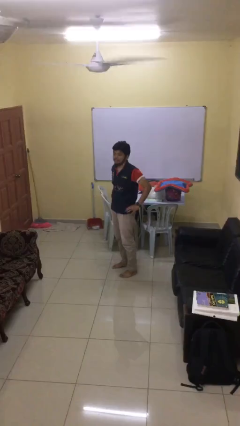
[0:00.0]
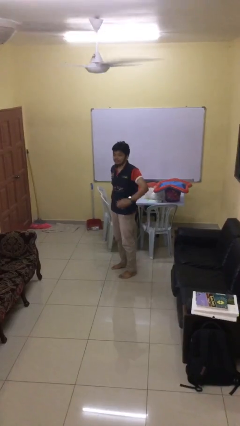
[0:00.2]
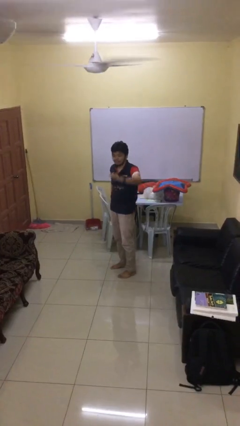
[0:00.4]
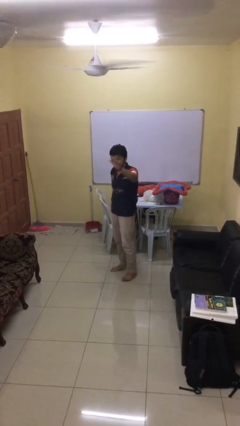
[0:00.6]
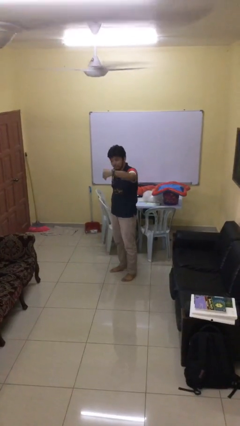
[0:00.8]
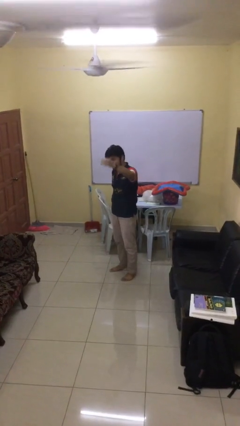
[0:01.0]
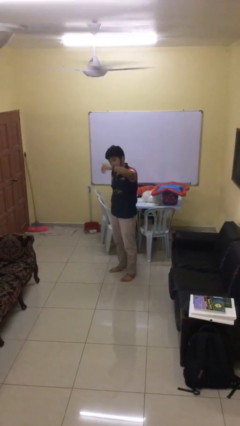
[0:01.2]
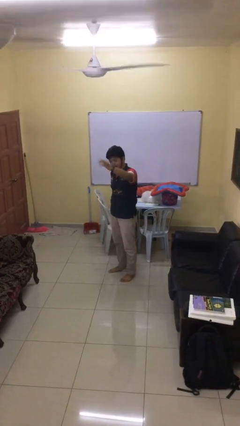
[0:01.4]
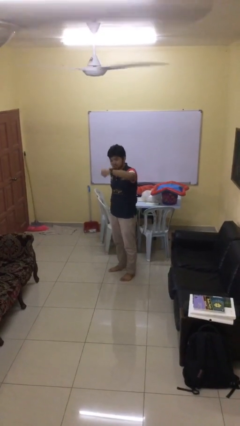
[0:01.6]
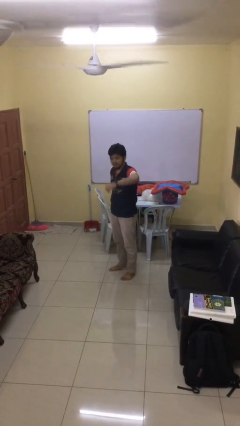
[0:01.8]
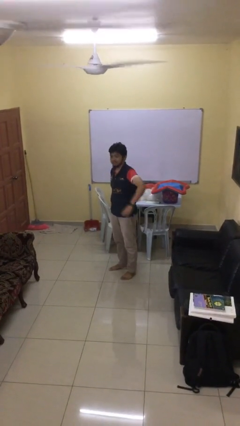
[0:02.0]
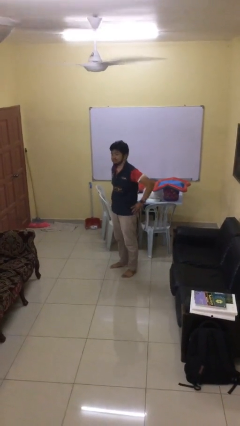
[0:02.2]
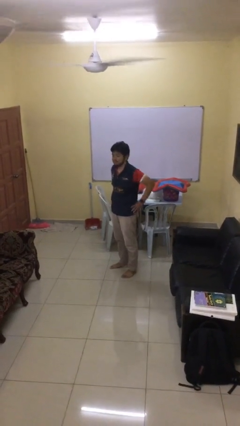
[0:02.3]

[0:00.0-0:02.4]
person gestures come here

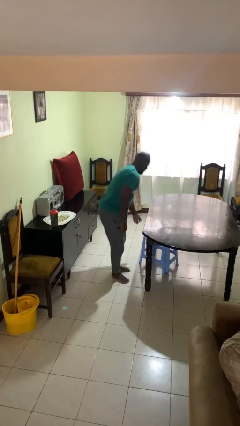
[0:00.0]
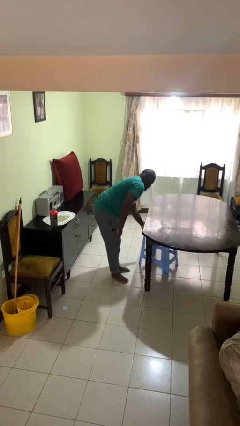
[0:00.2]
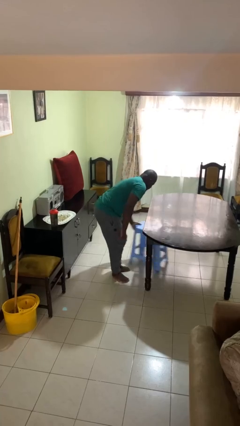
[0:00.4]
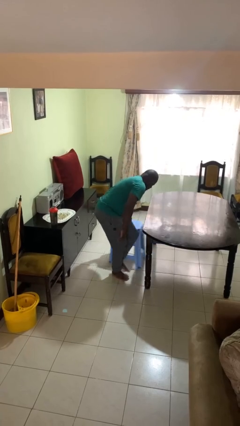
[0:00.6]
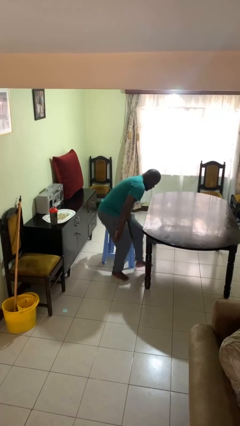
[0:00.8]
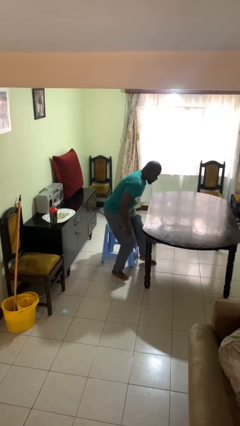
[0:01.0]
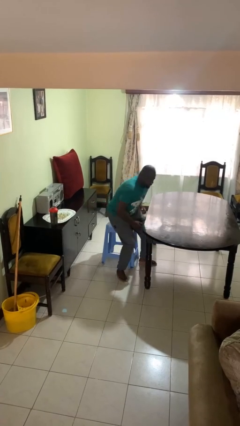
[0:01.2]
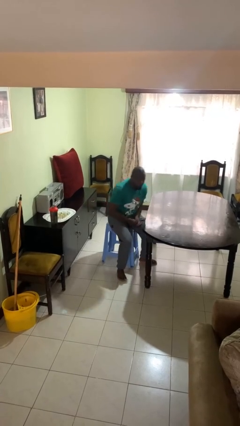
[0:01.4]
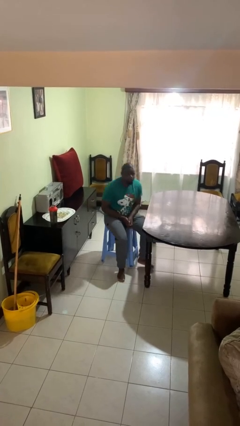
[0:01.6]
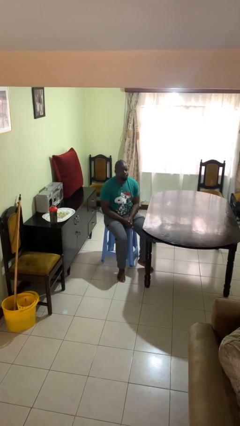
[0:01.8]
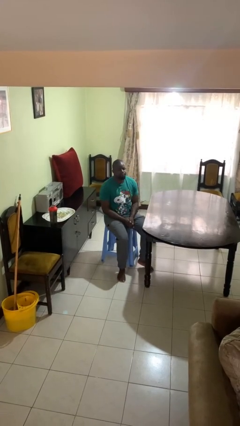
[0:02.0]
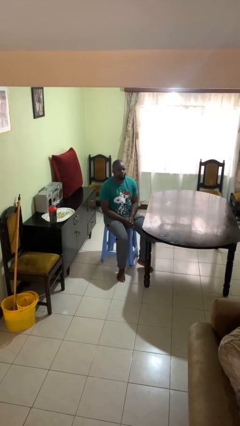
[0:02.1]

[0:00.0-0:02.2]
person sits down

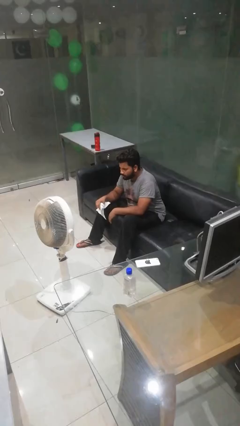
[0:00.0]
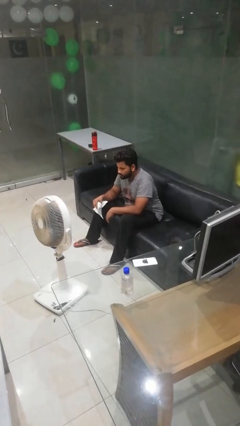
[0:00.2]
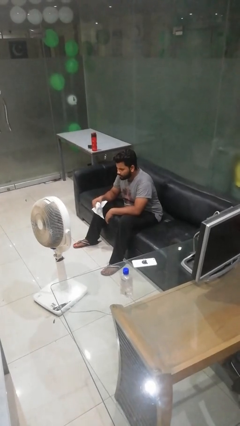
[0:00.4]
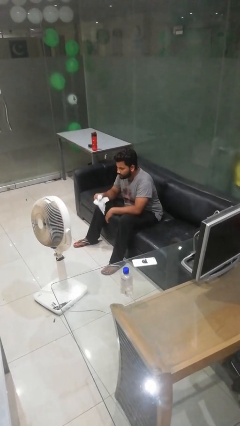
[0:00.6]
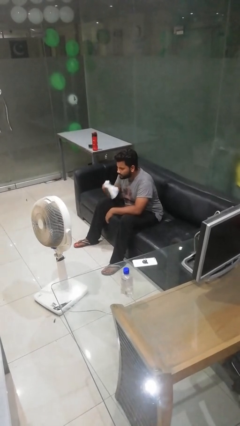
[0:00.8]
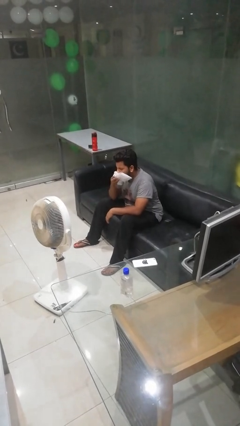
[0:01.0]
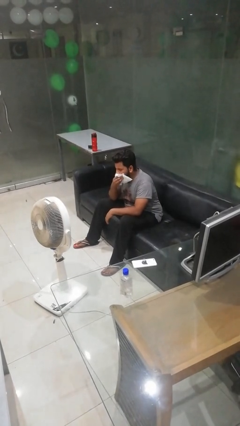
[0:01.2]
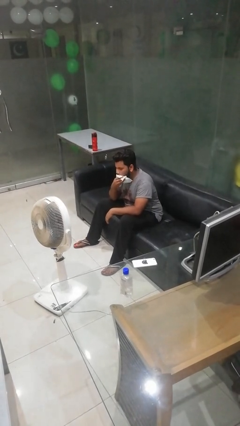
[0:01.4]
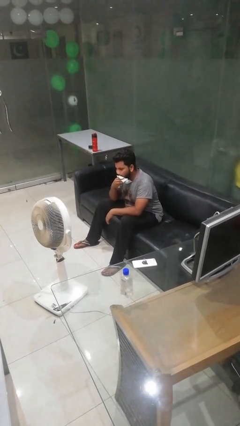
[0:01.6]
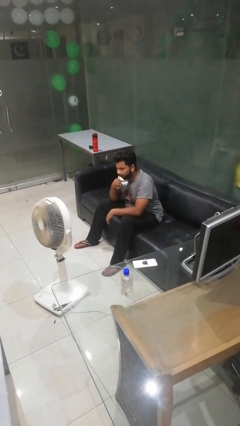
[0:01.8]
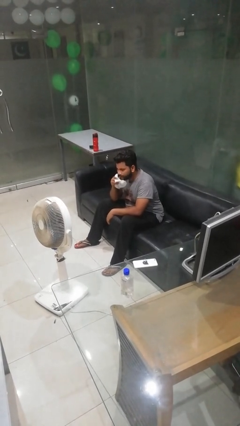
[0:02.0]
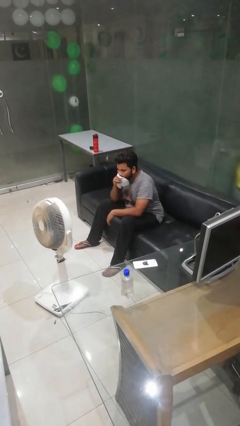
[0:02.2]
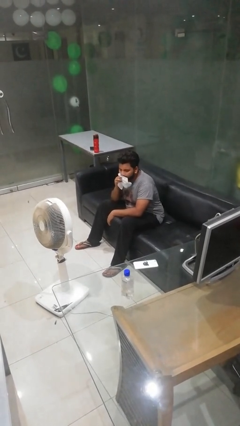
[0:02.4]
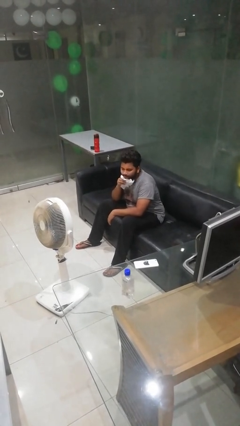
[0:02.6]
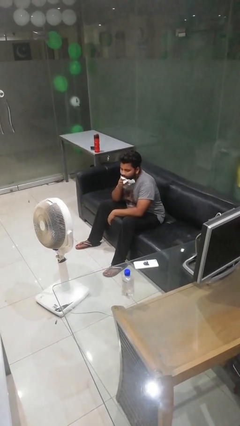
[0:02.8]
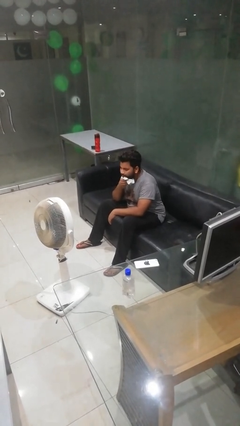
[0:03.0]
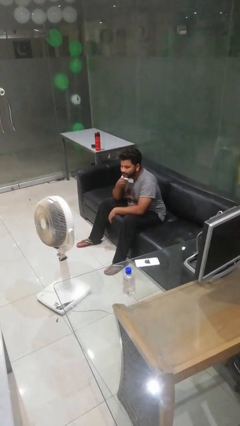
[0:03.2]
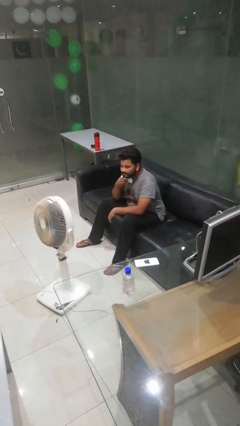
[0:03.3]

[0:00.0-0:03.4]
person wipes mouth with napkin

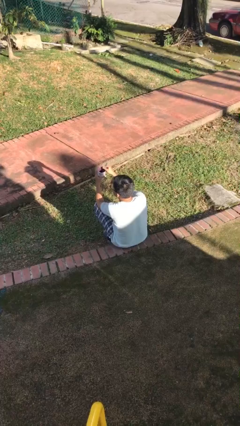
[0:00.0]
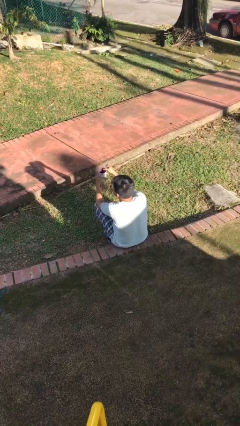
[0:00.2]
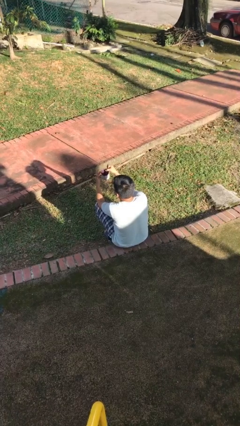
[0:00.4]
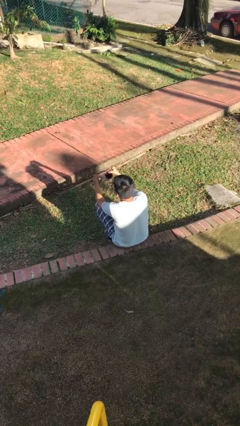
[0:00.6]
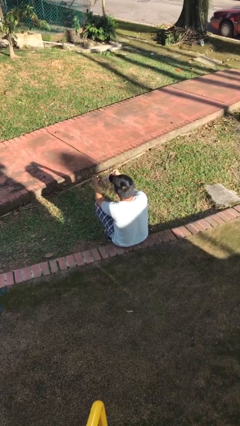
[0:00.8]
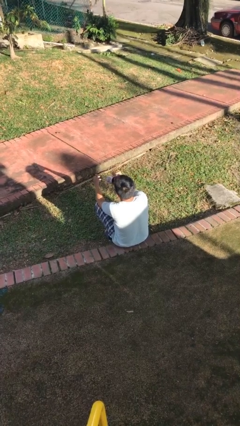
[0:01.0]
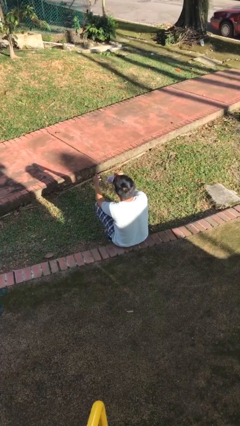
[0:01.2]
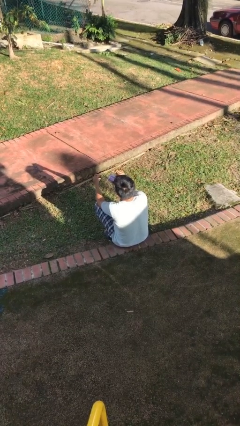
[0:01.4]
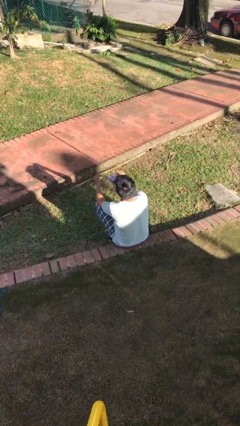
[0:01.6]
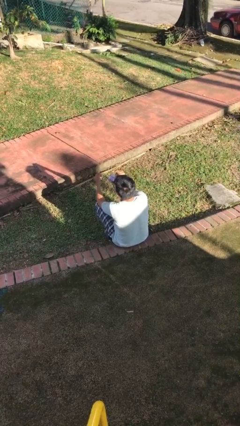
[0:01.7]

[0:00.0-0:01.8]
person drinks from mug

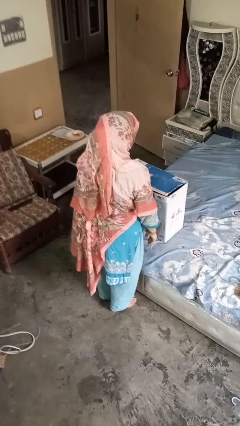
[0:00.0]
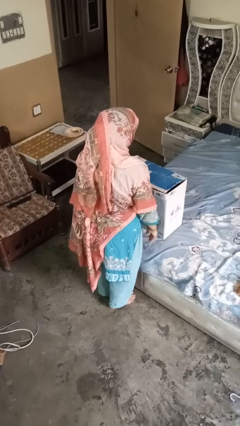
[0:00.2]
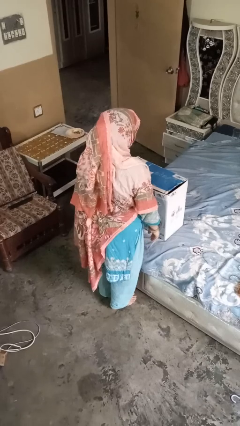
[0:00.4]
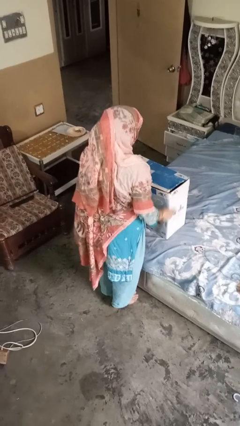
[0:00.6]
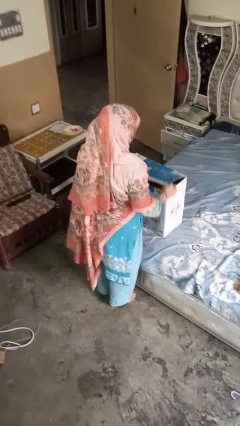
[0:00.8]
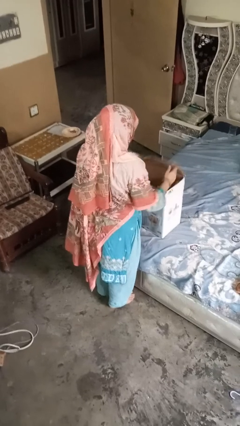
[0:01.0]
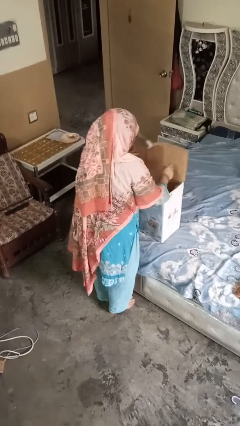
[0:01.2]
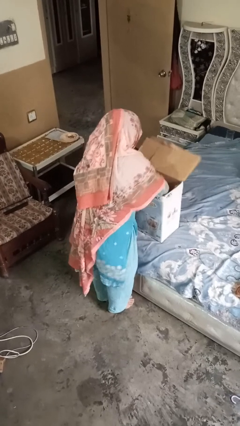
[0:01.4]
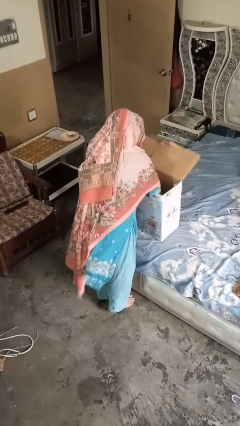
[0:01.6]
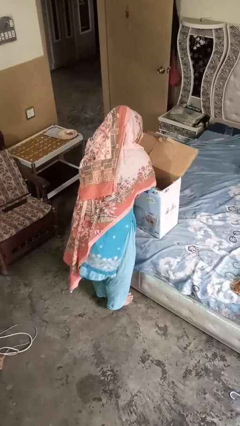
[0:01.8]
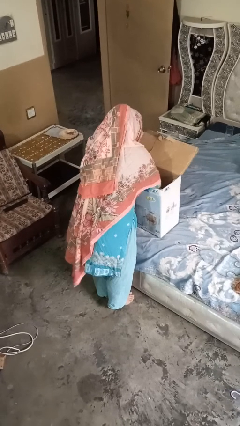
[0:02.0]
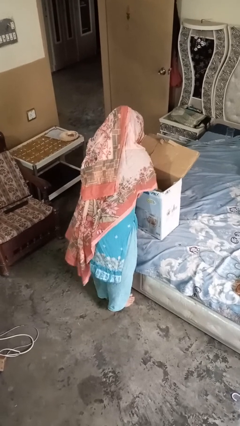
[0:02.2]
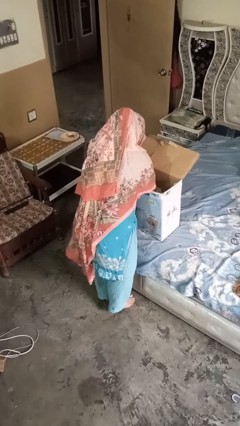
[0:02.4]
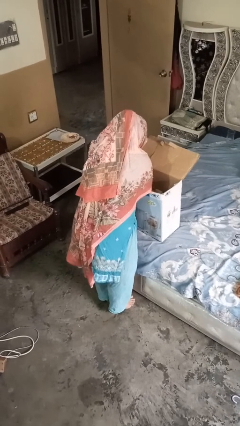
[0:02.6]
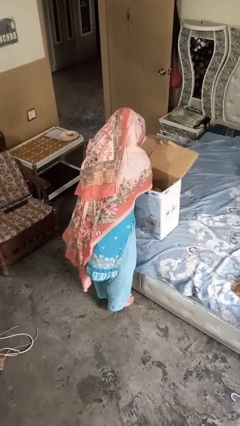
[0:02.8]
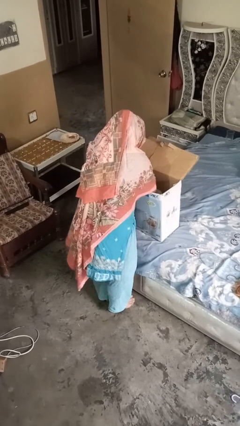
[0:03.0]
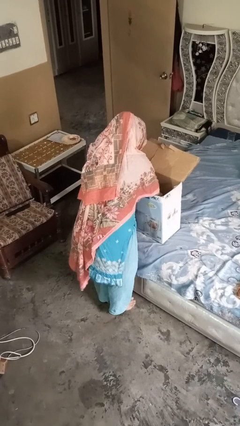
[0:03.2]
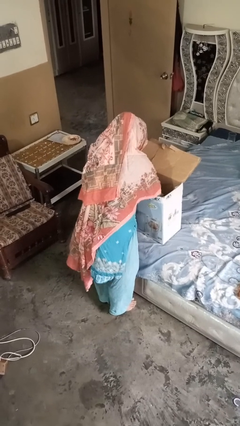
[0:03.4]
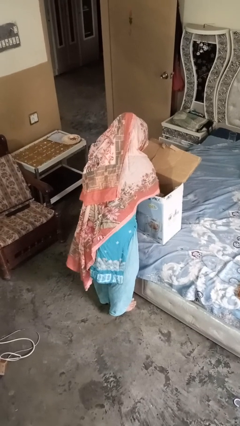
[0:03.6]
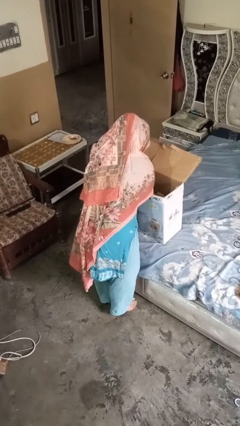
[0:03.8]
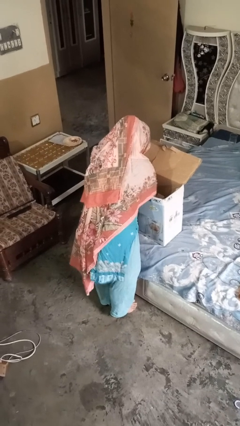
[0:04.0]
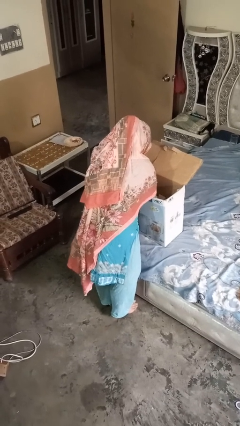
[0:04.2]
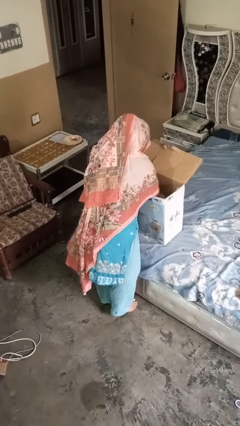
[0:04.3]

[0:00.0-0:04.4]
person searches in box

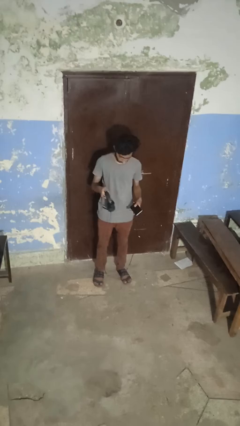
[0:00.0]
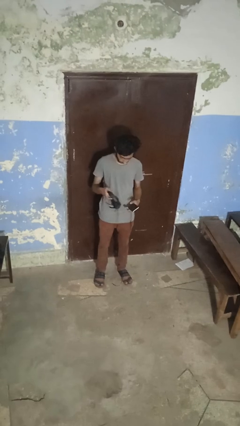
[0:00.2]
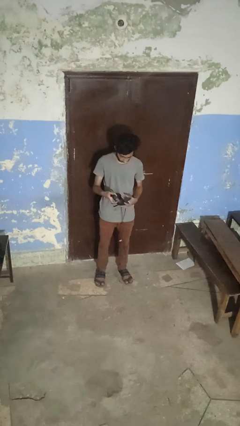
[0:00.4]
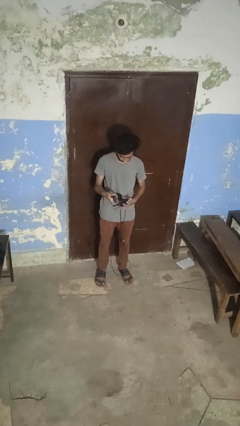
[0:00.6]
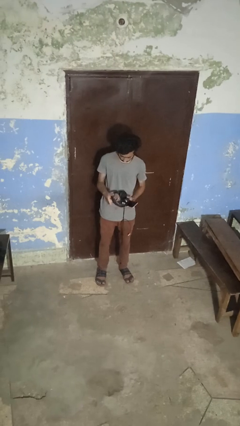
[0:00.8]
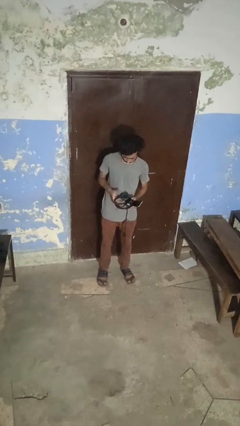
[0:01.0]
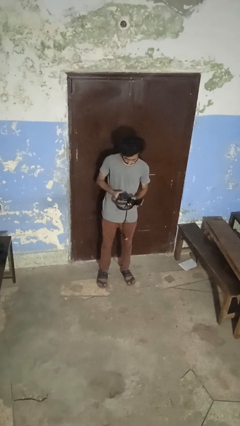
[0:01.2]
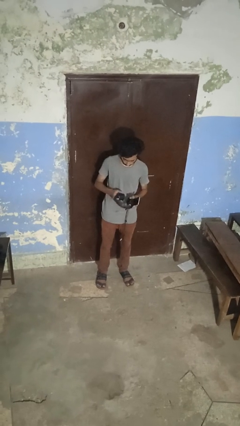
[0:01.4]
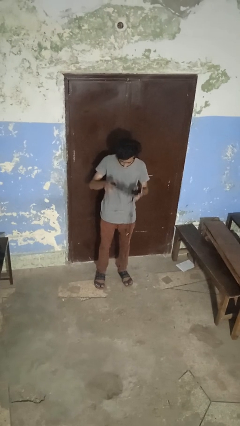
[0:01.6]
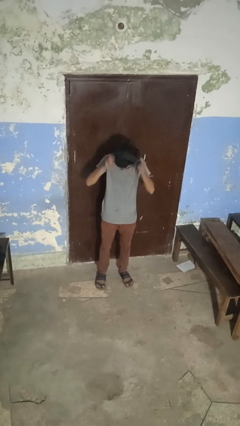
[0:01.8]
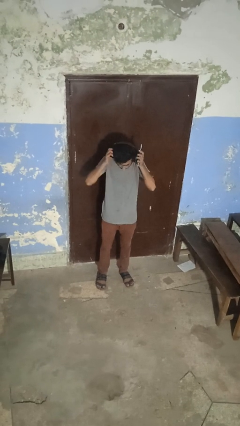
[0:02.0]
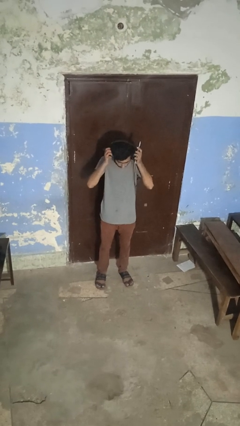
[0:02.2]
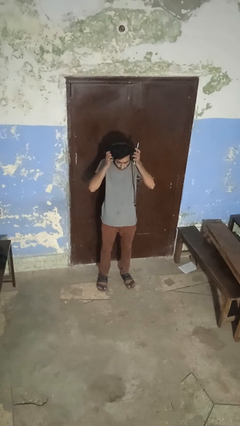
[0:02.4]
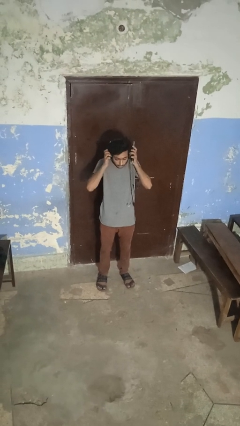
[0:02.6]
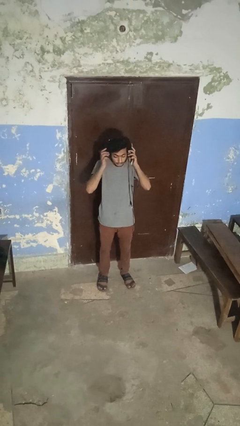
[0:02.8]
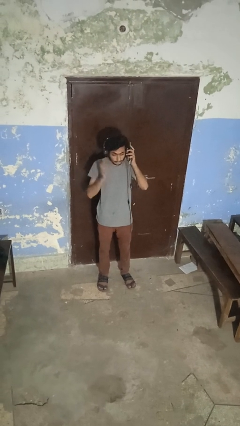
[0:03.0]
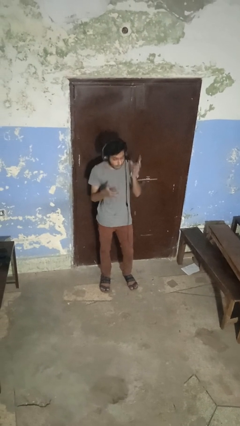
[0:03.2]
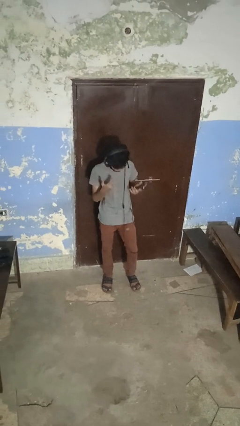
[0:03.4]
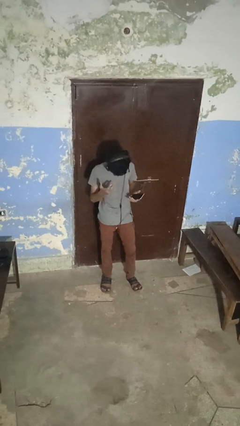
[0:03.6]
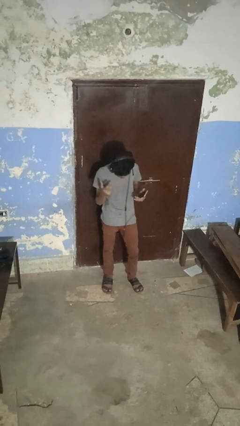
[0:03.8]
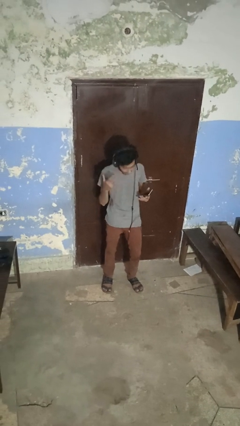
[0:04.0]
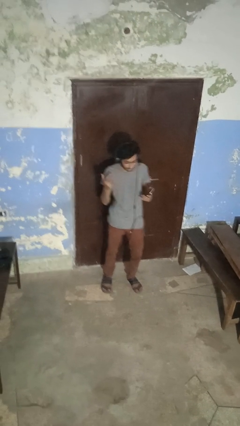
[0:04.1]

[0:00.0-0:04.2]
person puts on headphones
